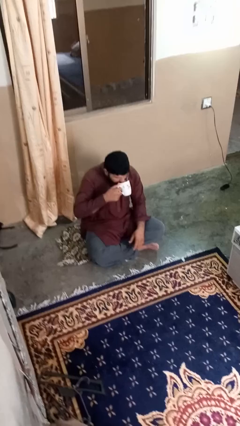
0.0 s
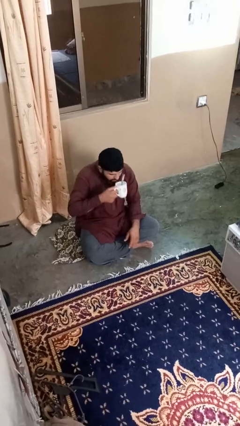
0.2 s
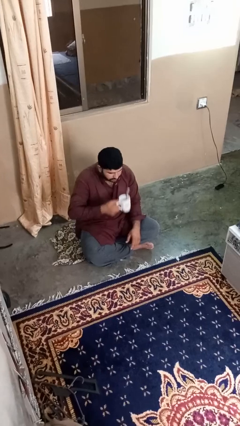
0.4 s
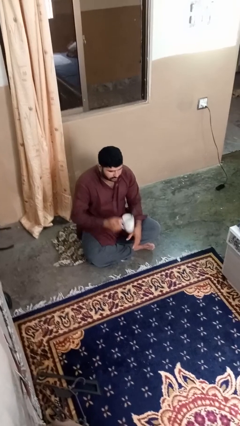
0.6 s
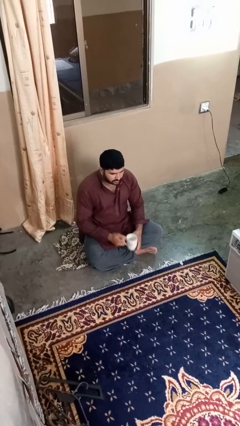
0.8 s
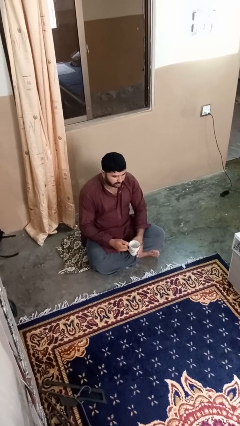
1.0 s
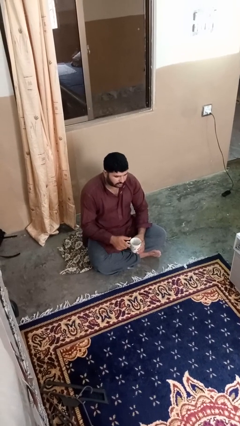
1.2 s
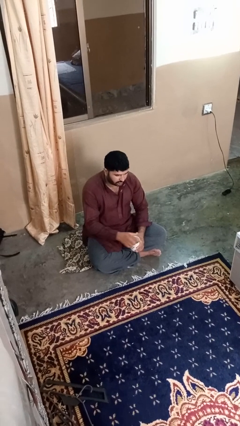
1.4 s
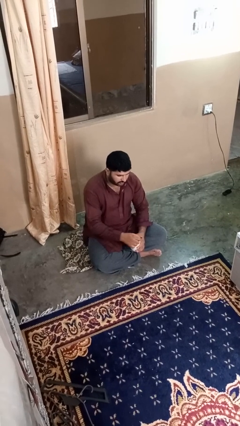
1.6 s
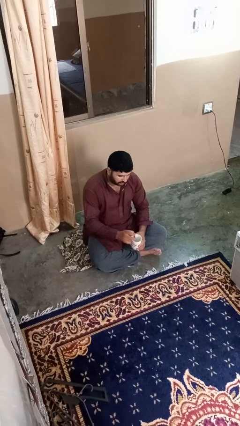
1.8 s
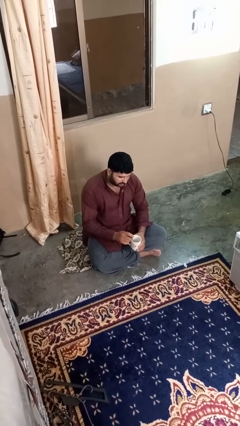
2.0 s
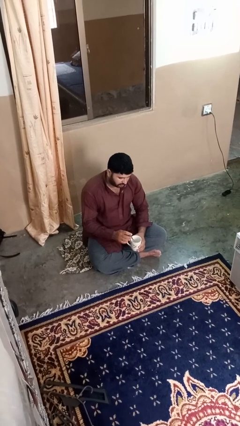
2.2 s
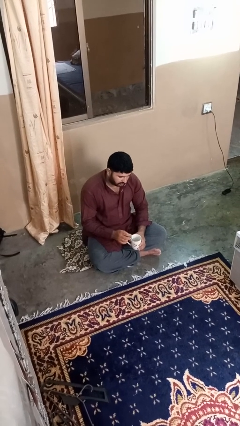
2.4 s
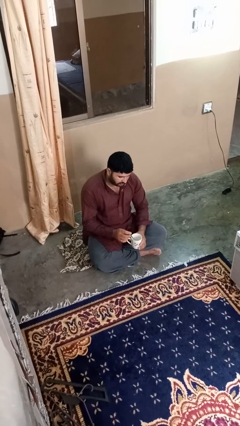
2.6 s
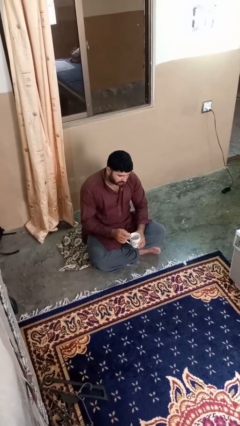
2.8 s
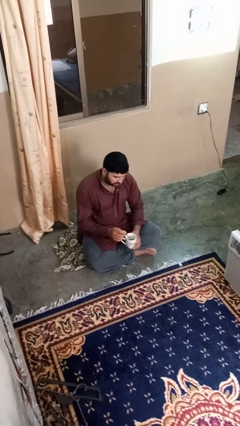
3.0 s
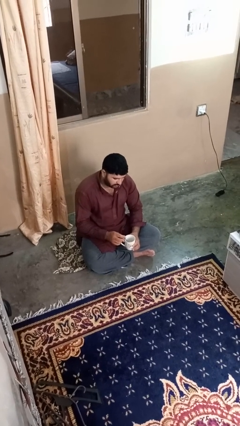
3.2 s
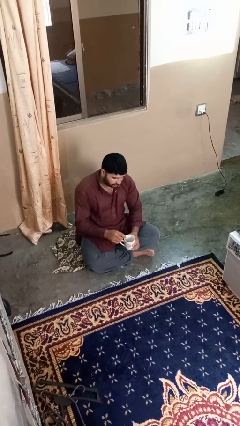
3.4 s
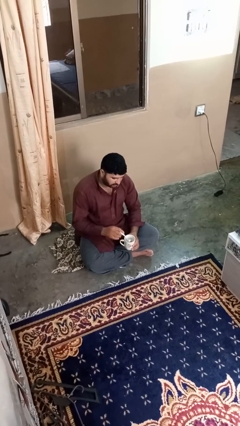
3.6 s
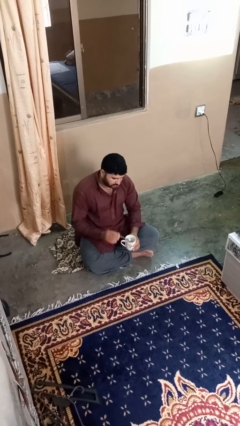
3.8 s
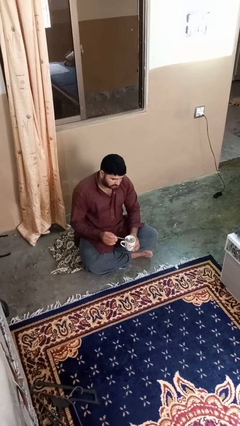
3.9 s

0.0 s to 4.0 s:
person stirs mug

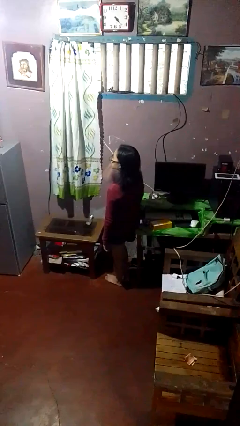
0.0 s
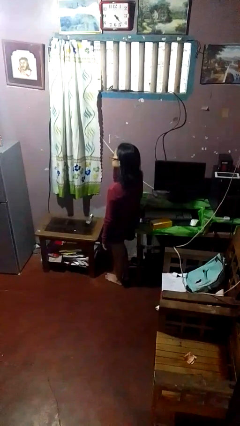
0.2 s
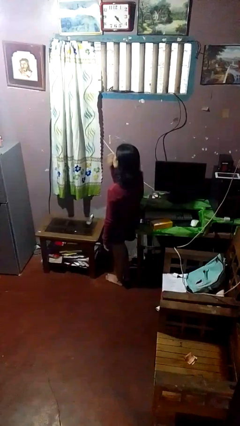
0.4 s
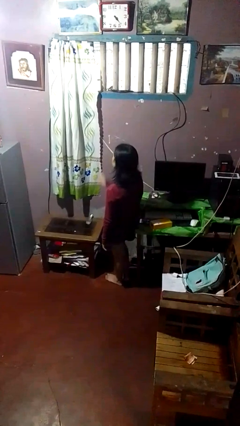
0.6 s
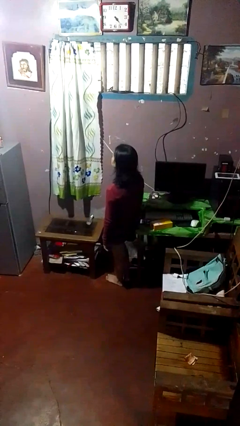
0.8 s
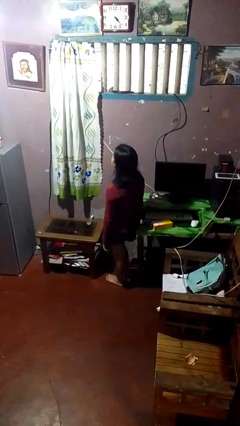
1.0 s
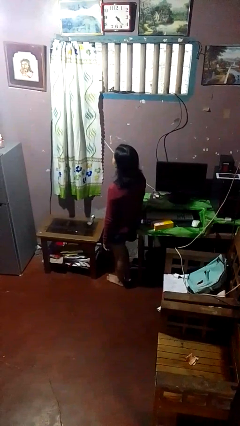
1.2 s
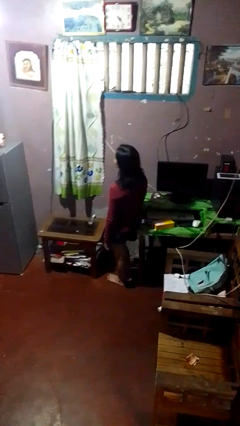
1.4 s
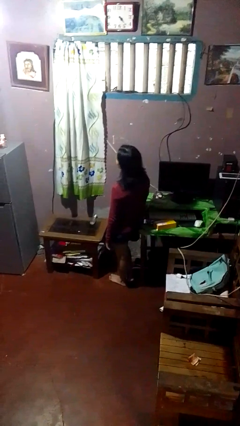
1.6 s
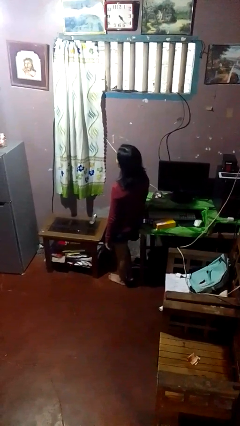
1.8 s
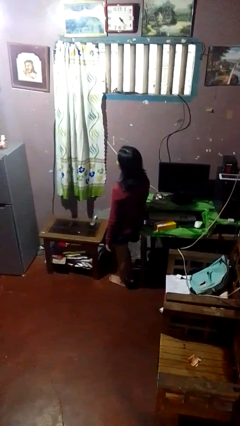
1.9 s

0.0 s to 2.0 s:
person takes off glasses

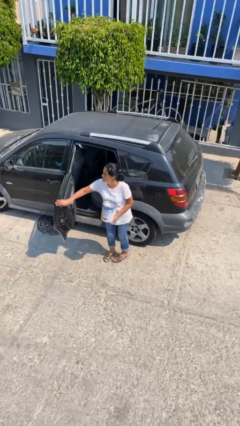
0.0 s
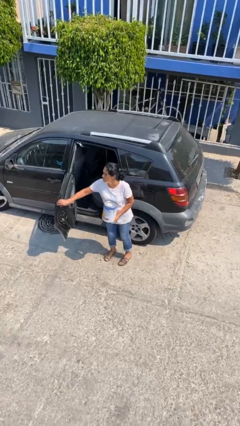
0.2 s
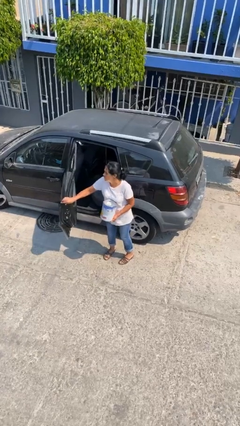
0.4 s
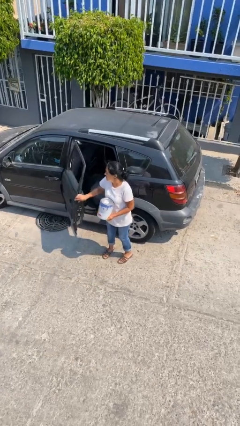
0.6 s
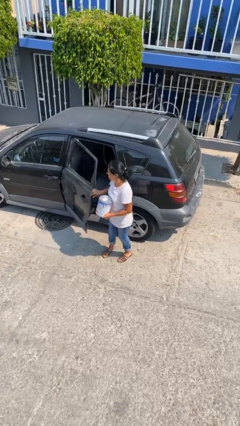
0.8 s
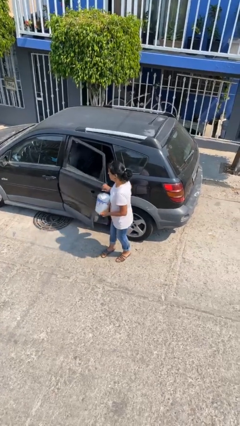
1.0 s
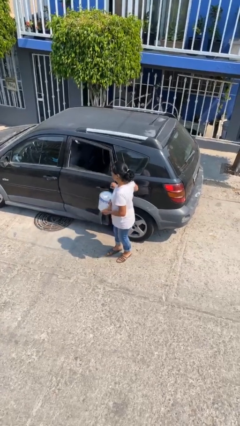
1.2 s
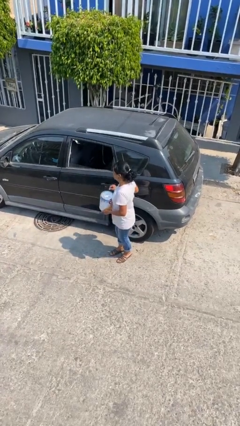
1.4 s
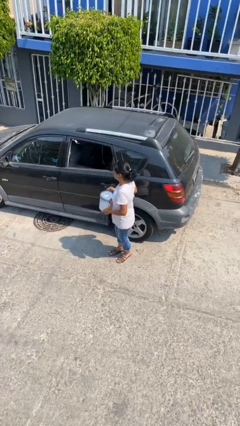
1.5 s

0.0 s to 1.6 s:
person closes car door

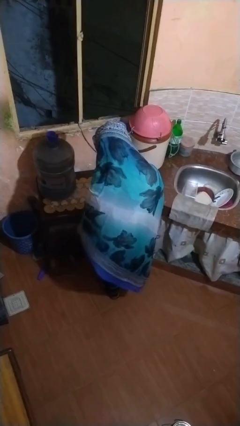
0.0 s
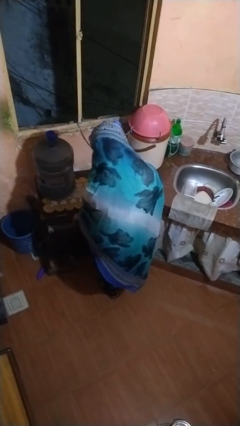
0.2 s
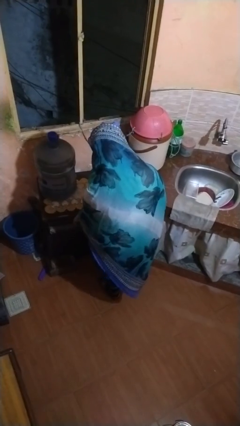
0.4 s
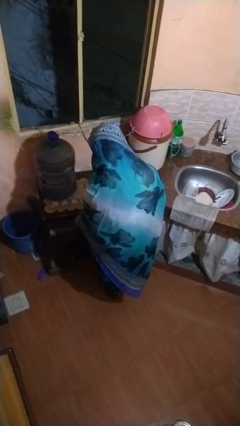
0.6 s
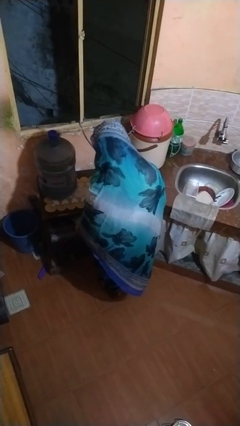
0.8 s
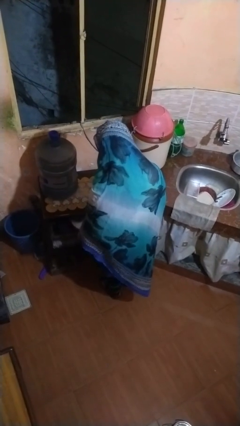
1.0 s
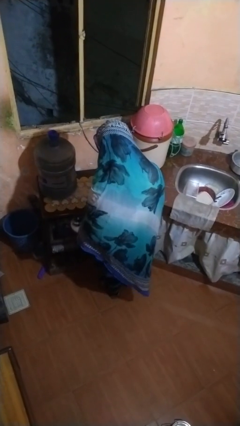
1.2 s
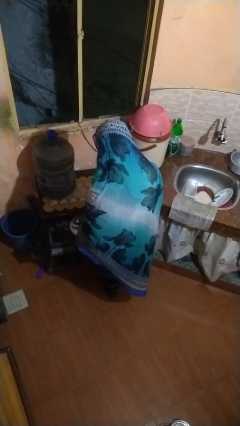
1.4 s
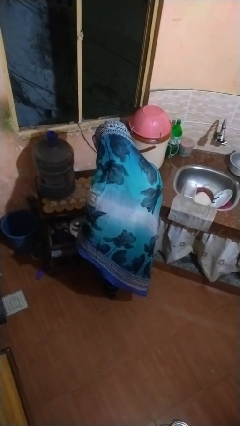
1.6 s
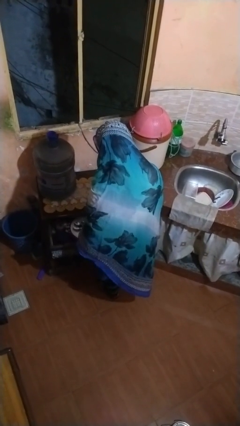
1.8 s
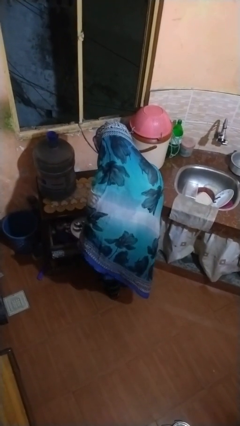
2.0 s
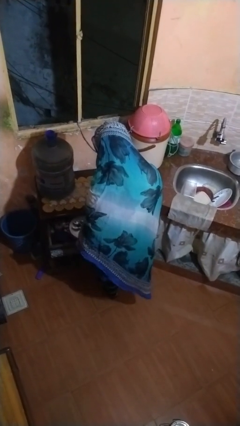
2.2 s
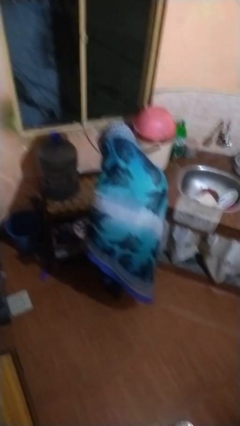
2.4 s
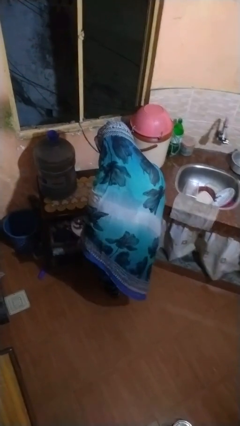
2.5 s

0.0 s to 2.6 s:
person opens kitchen drawer

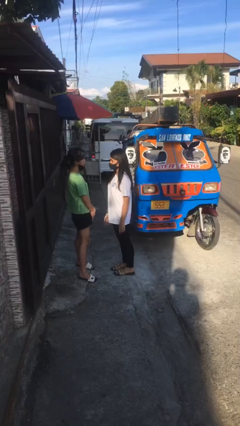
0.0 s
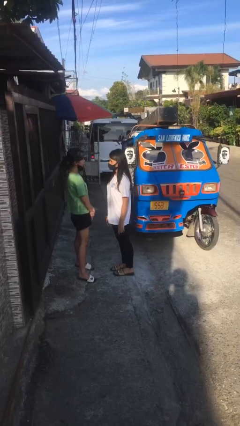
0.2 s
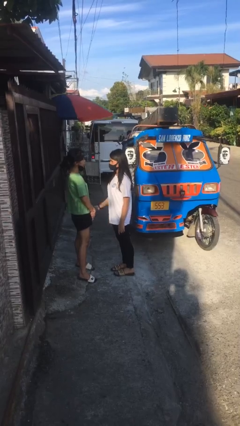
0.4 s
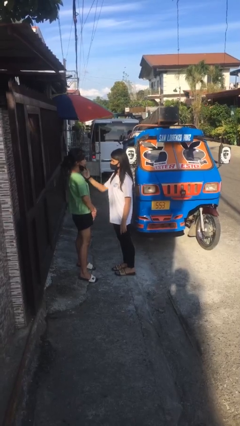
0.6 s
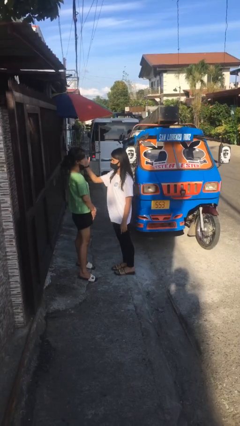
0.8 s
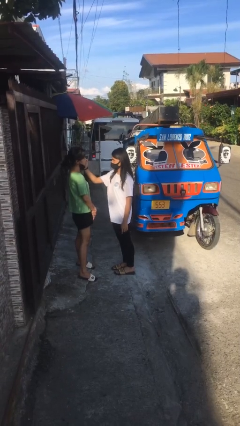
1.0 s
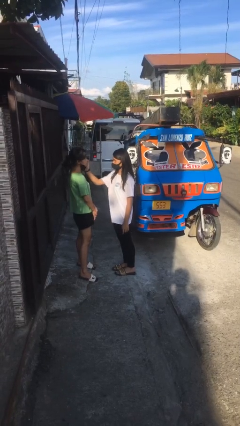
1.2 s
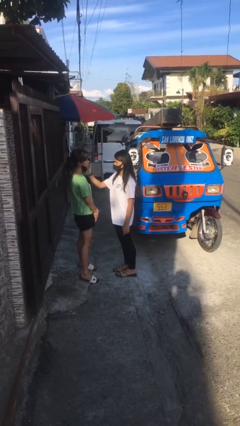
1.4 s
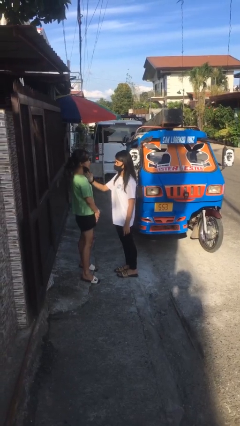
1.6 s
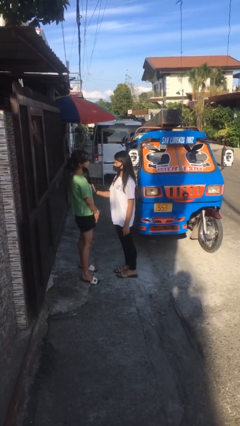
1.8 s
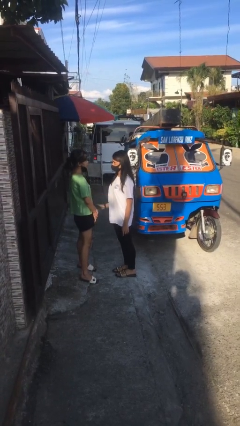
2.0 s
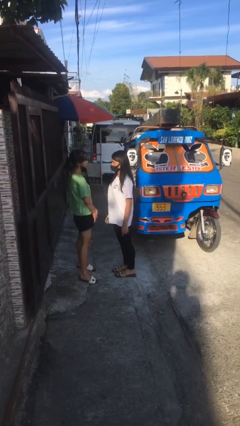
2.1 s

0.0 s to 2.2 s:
person touches face of person

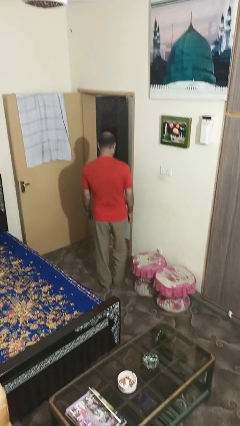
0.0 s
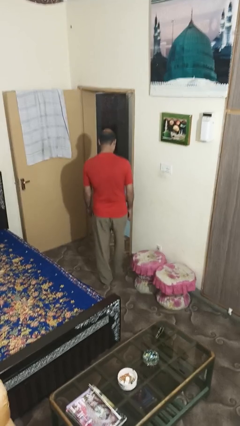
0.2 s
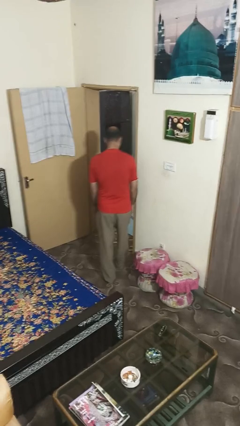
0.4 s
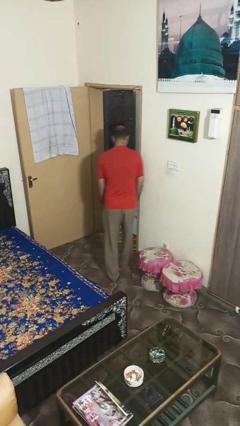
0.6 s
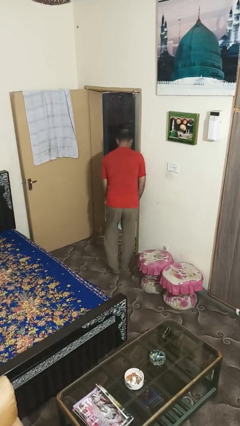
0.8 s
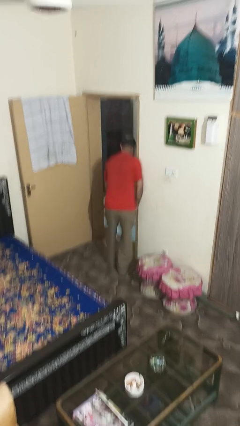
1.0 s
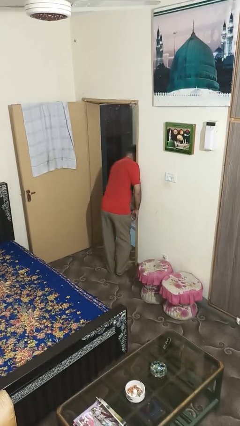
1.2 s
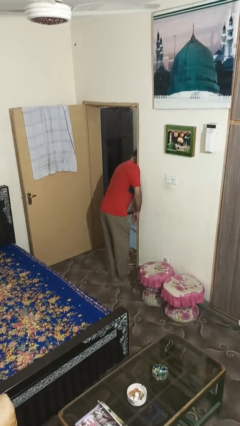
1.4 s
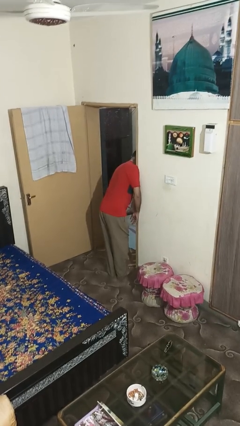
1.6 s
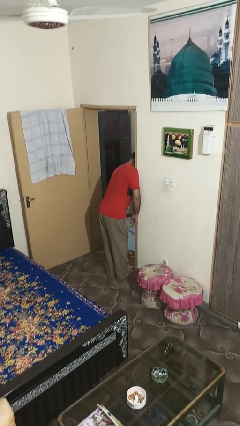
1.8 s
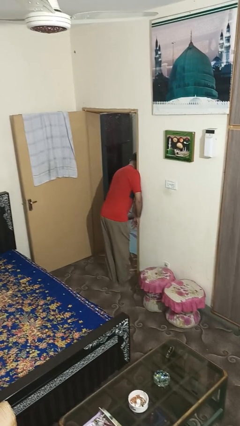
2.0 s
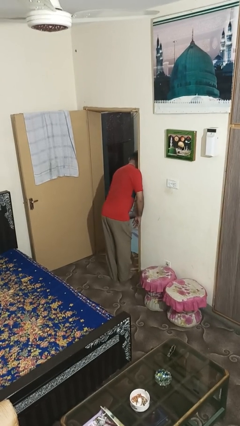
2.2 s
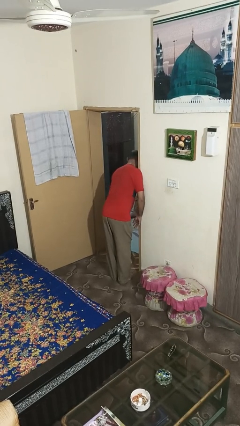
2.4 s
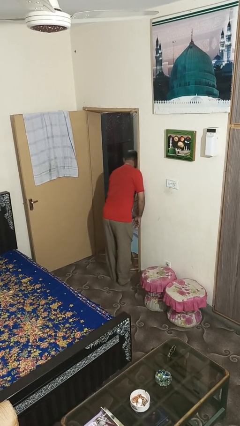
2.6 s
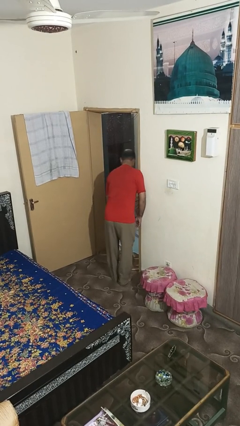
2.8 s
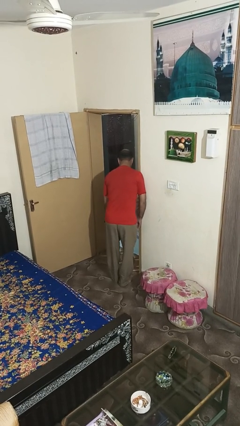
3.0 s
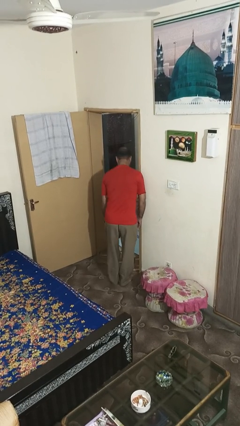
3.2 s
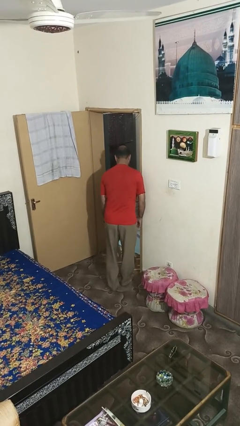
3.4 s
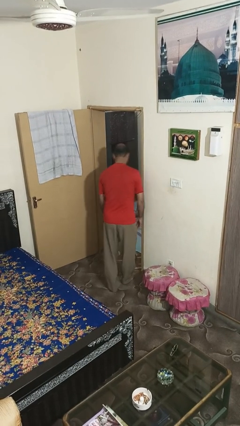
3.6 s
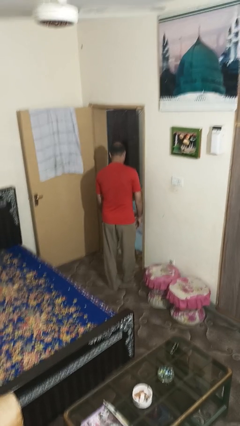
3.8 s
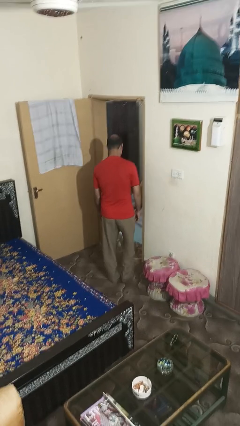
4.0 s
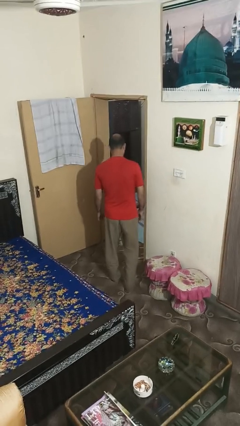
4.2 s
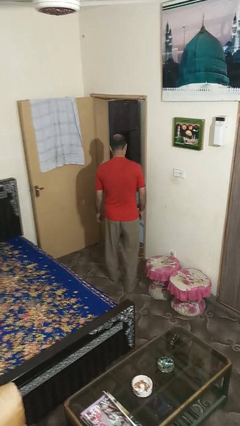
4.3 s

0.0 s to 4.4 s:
person bumps into wall

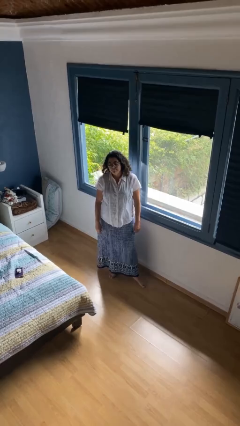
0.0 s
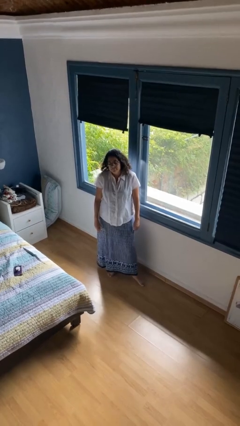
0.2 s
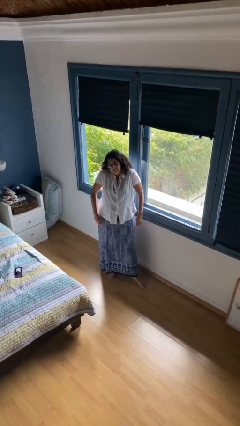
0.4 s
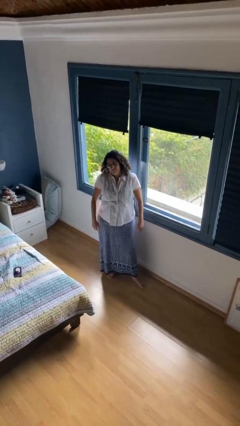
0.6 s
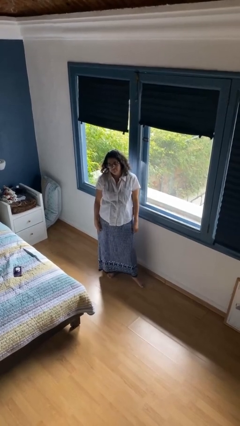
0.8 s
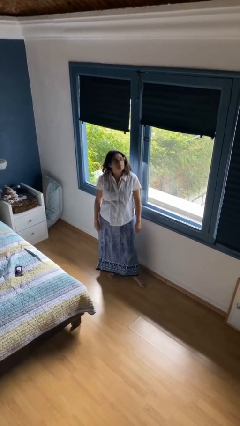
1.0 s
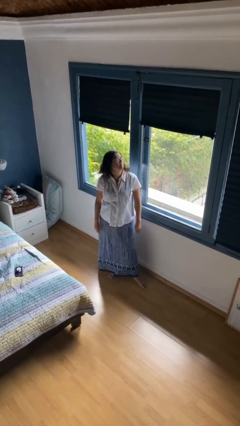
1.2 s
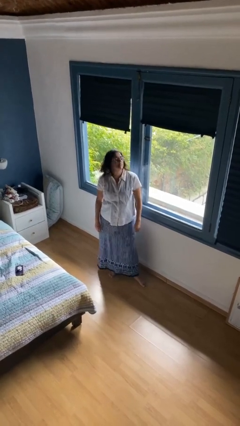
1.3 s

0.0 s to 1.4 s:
person shrugs
